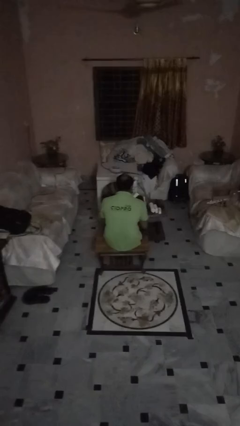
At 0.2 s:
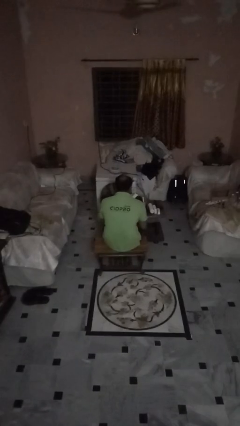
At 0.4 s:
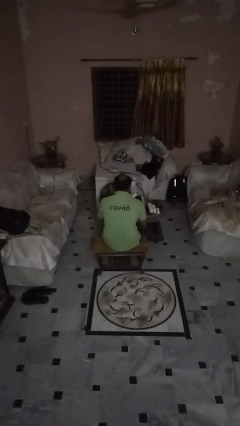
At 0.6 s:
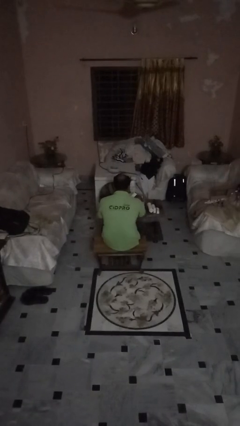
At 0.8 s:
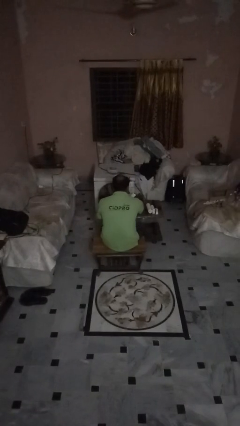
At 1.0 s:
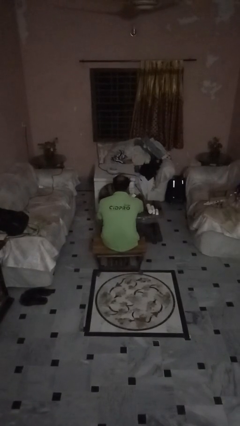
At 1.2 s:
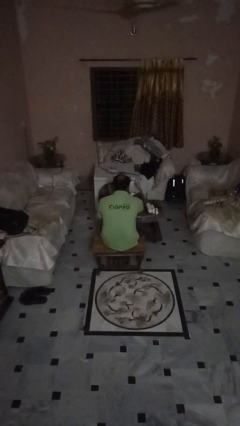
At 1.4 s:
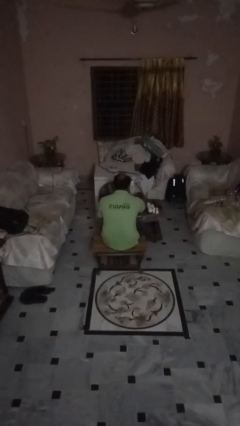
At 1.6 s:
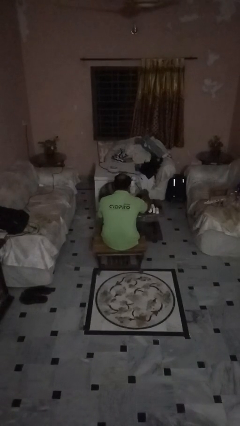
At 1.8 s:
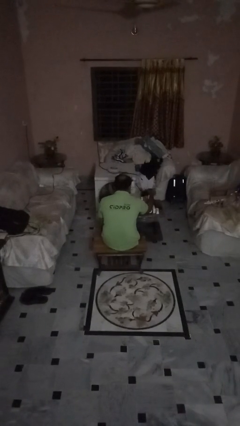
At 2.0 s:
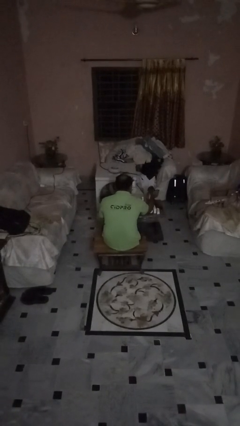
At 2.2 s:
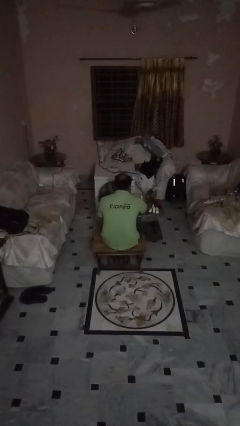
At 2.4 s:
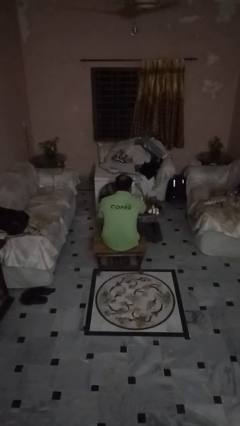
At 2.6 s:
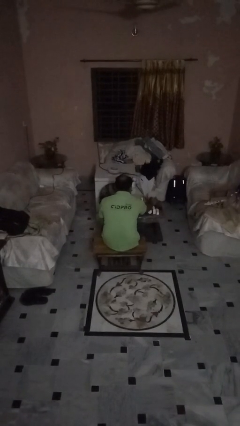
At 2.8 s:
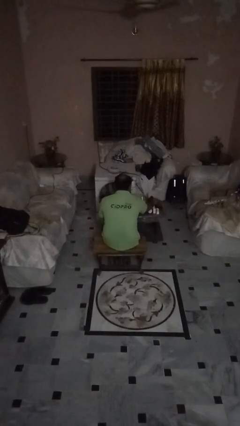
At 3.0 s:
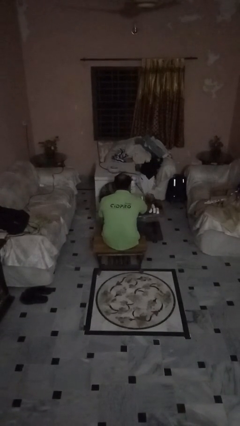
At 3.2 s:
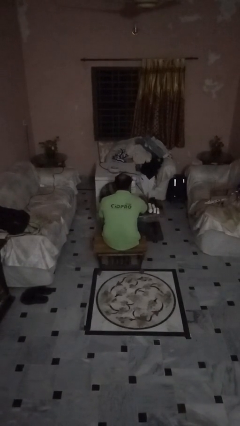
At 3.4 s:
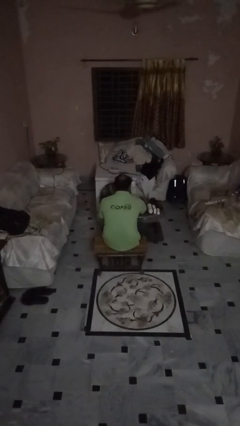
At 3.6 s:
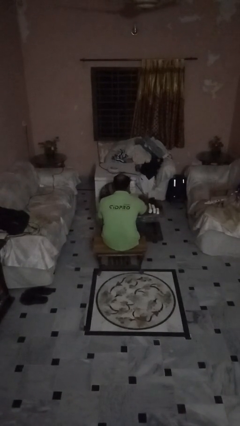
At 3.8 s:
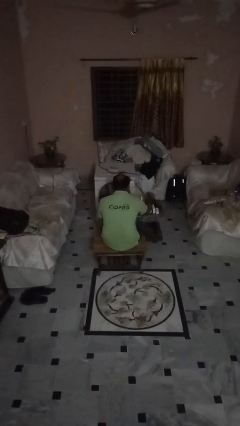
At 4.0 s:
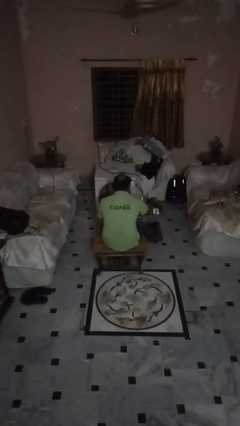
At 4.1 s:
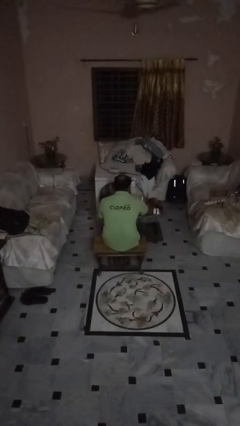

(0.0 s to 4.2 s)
person unloads box onto table

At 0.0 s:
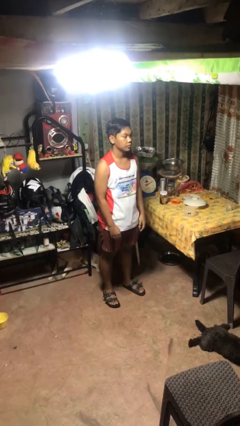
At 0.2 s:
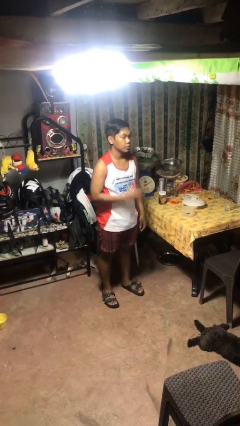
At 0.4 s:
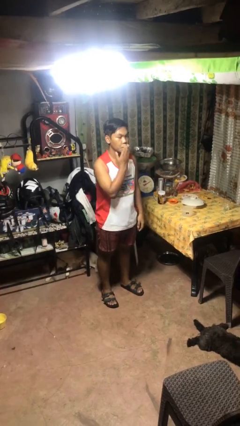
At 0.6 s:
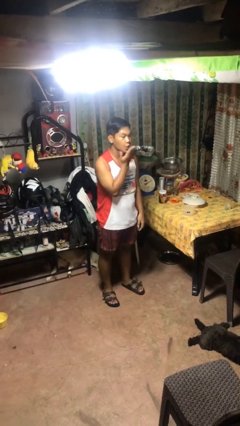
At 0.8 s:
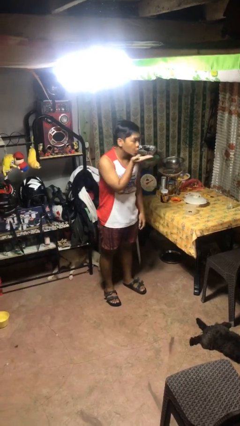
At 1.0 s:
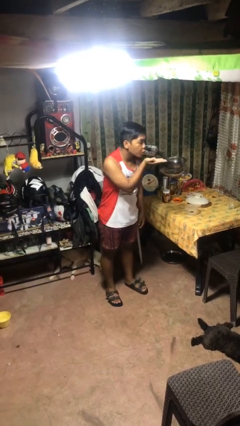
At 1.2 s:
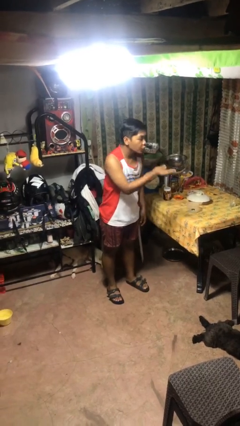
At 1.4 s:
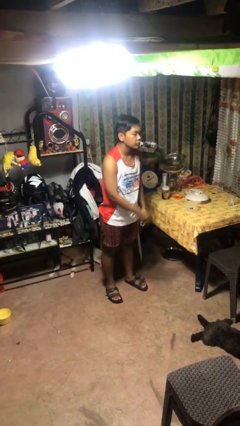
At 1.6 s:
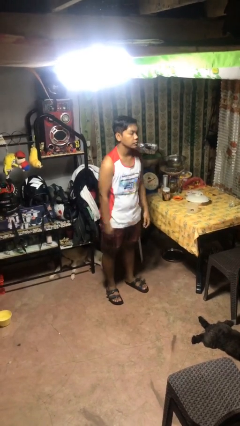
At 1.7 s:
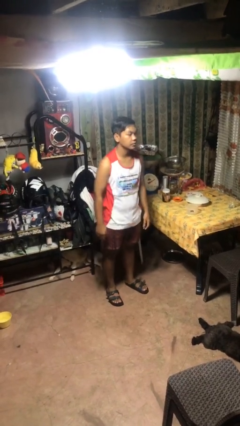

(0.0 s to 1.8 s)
person gestures blow kiss

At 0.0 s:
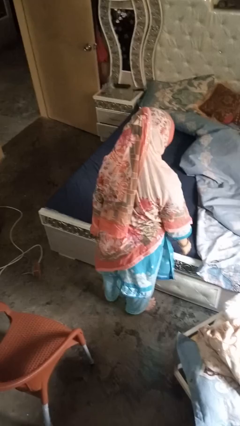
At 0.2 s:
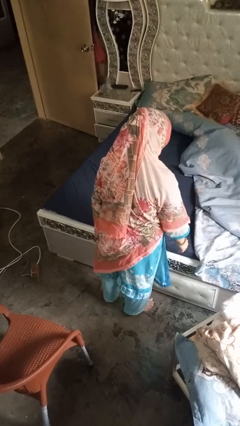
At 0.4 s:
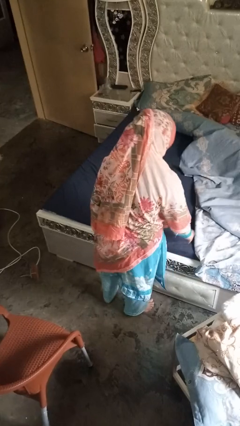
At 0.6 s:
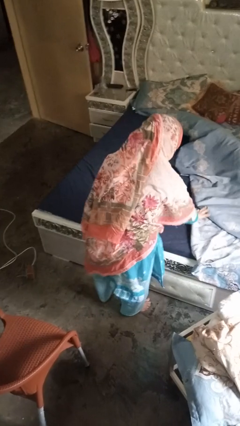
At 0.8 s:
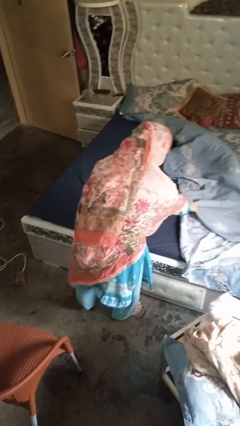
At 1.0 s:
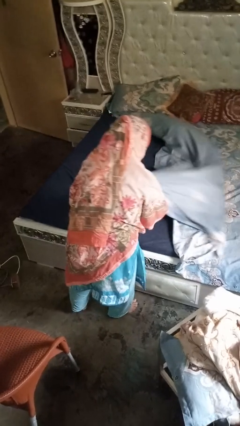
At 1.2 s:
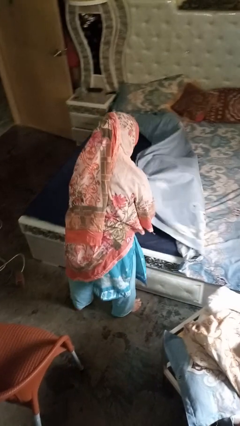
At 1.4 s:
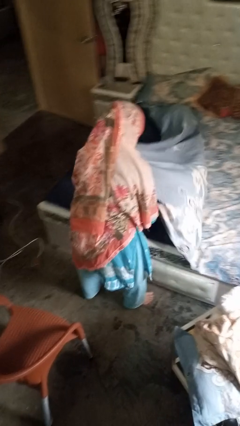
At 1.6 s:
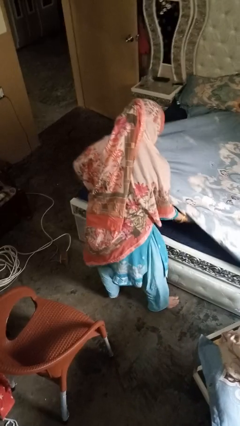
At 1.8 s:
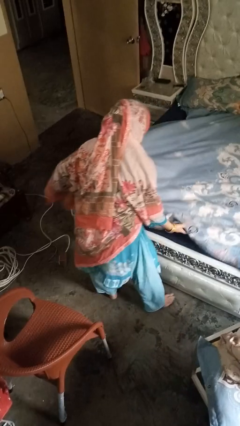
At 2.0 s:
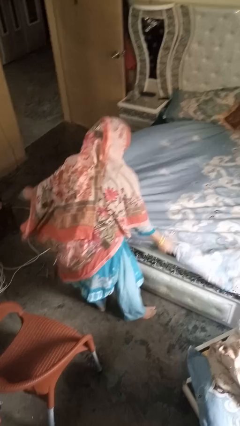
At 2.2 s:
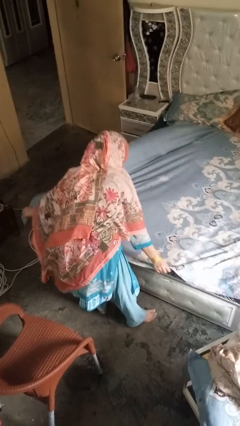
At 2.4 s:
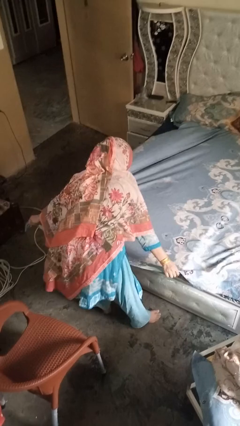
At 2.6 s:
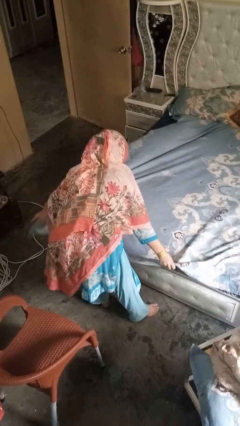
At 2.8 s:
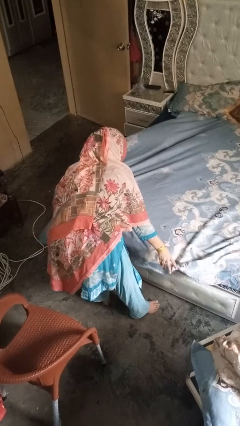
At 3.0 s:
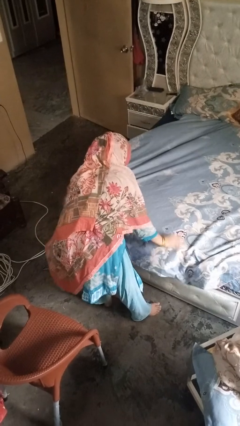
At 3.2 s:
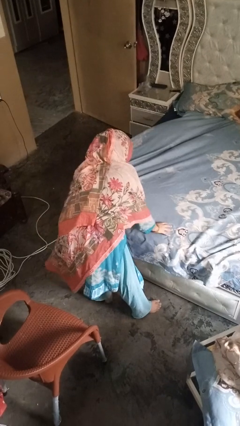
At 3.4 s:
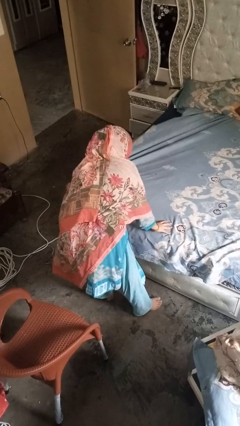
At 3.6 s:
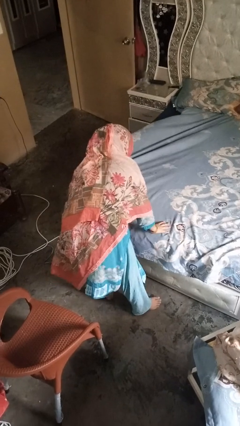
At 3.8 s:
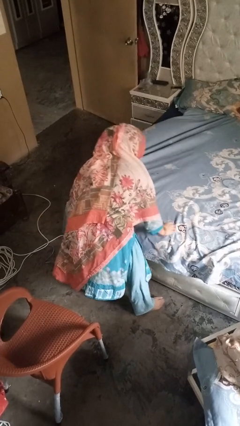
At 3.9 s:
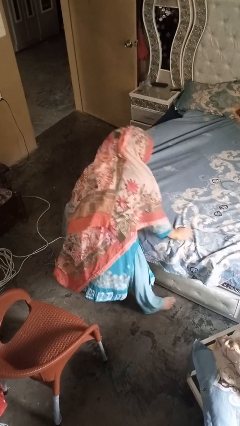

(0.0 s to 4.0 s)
person makes bed

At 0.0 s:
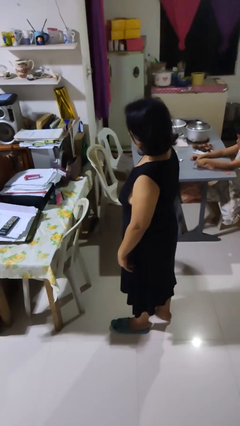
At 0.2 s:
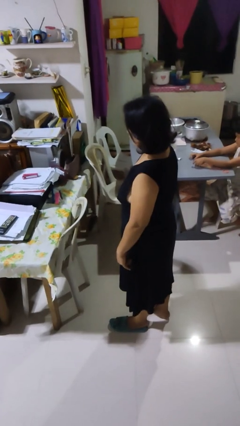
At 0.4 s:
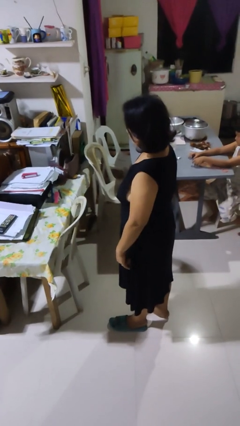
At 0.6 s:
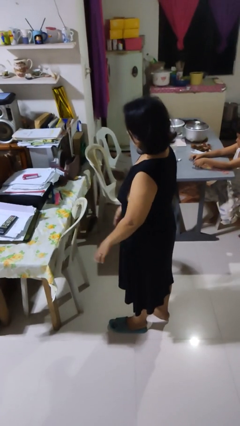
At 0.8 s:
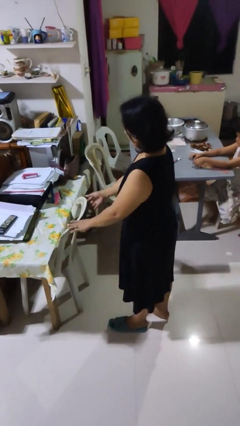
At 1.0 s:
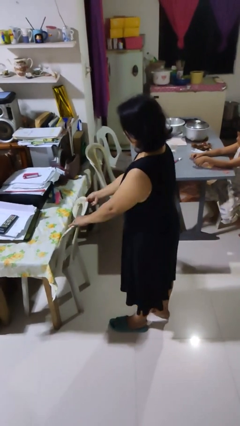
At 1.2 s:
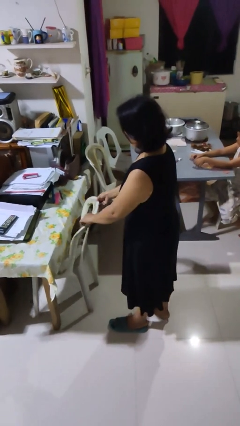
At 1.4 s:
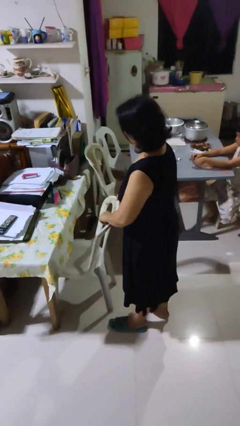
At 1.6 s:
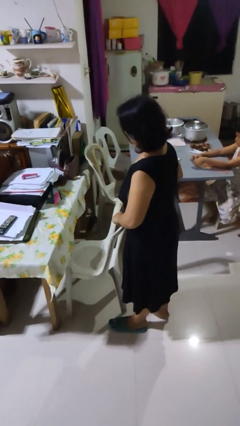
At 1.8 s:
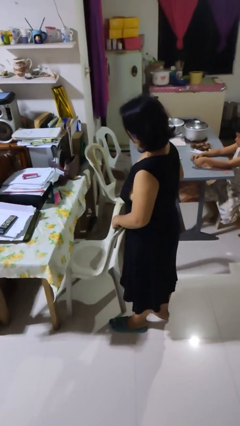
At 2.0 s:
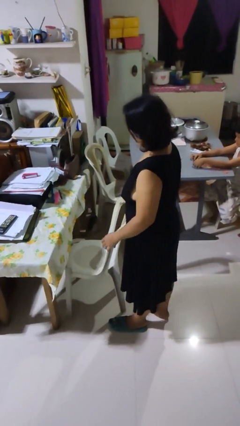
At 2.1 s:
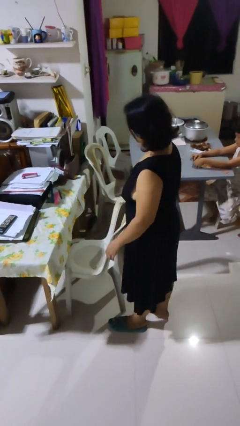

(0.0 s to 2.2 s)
person pulls out chair

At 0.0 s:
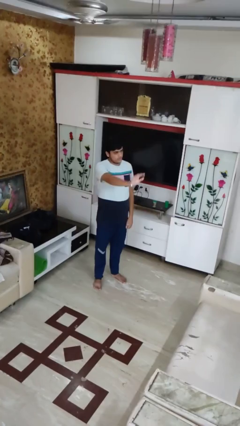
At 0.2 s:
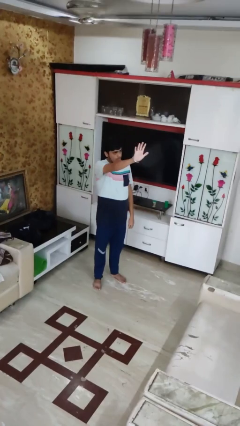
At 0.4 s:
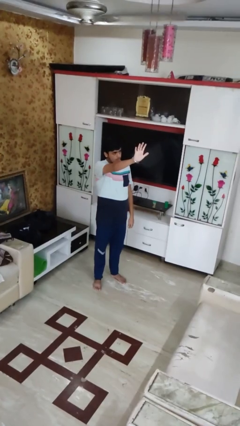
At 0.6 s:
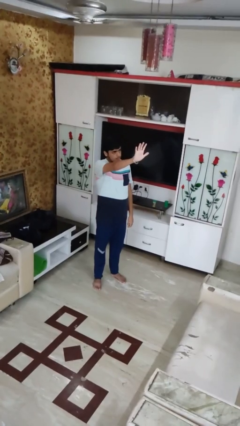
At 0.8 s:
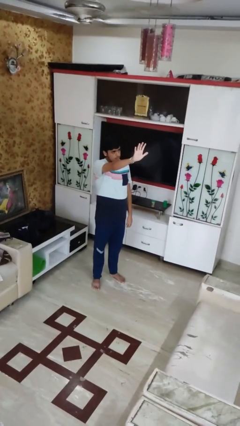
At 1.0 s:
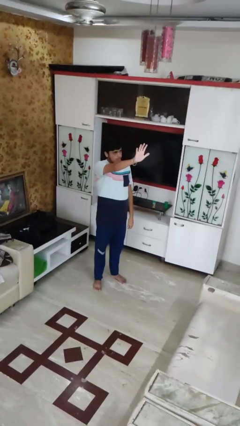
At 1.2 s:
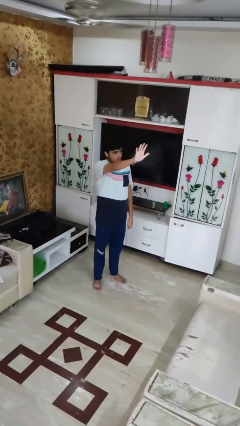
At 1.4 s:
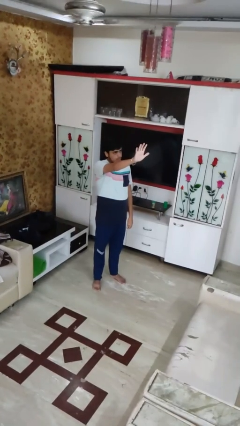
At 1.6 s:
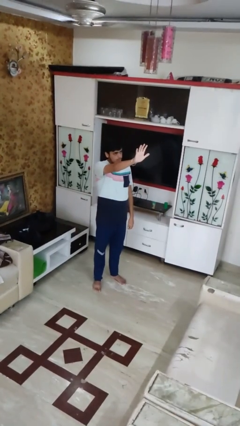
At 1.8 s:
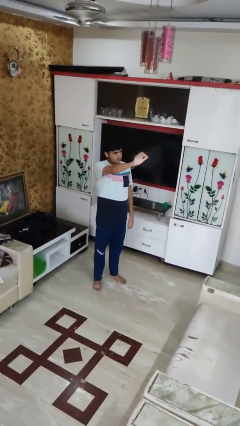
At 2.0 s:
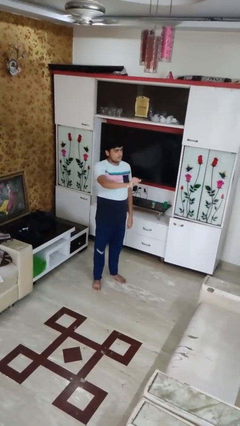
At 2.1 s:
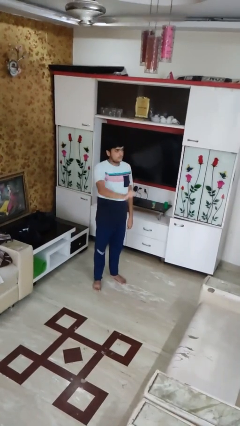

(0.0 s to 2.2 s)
person gestures number five

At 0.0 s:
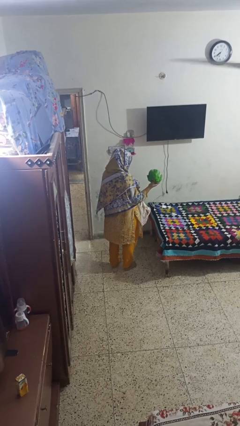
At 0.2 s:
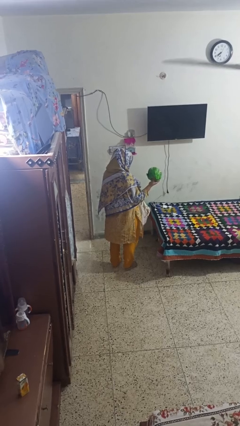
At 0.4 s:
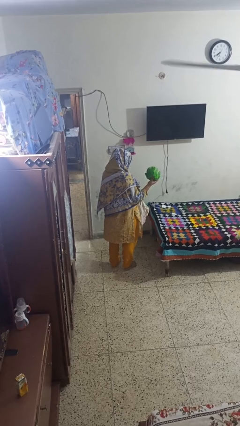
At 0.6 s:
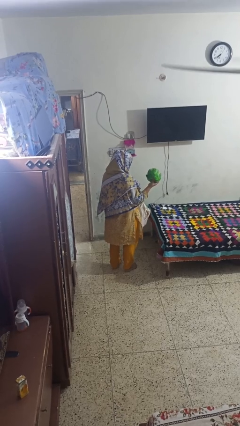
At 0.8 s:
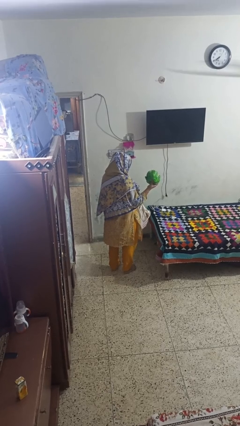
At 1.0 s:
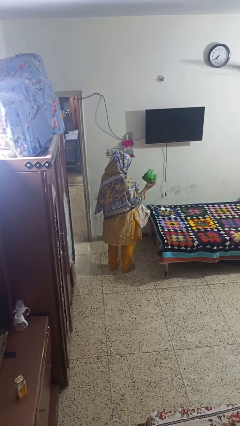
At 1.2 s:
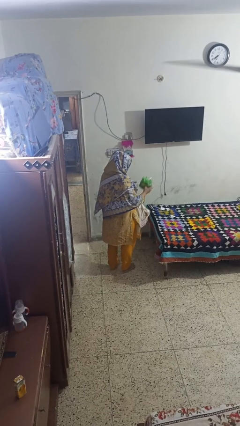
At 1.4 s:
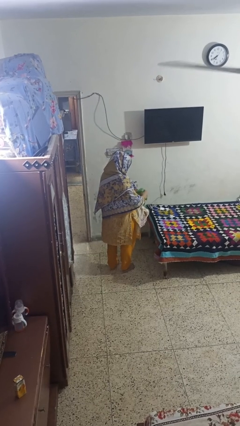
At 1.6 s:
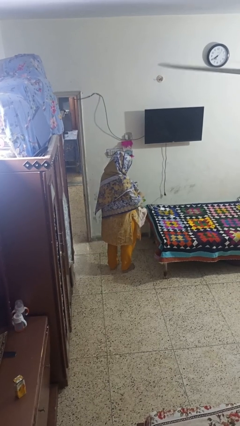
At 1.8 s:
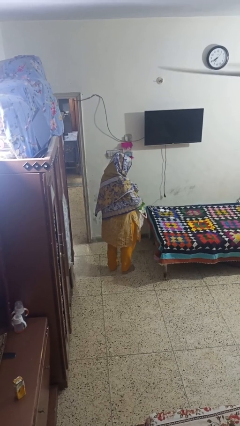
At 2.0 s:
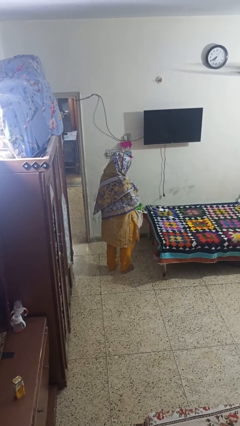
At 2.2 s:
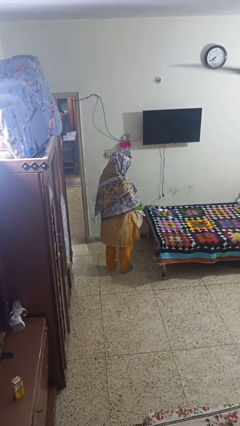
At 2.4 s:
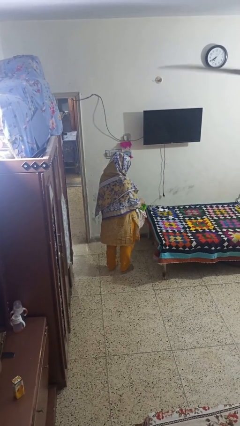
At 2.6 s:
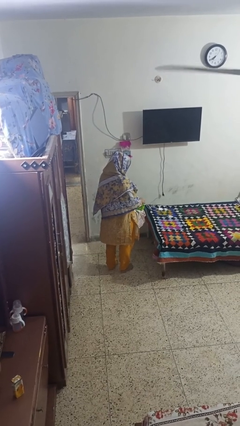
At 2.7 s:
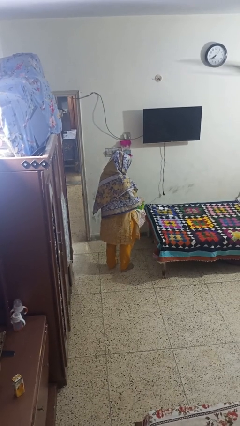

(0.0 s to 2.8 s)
person puts object into bag
